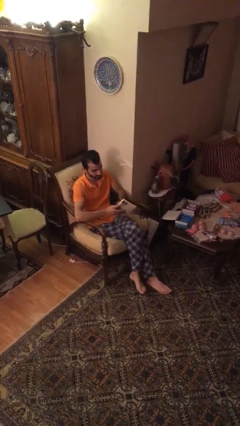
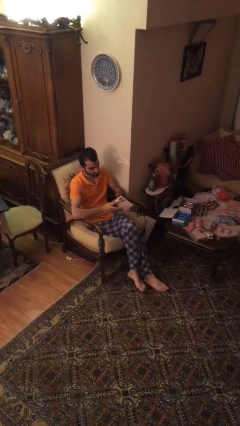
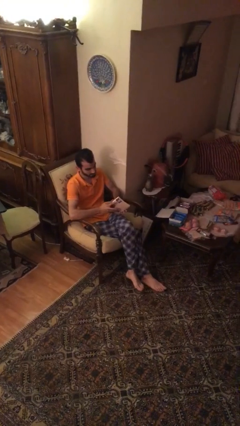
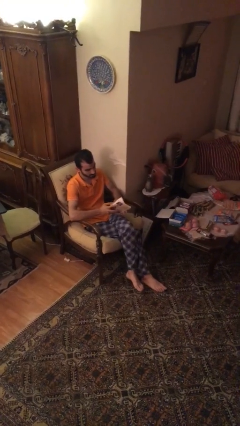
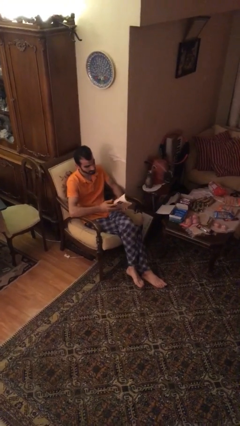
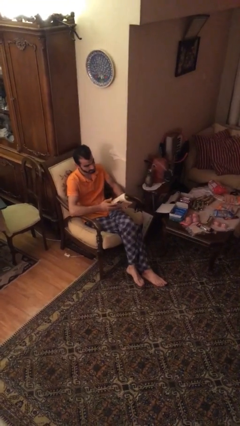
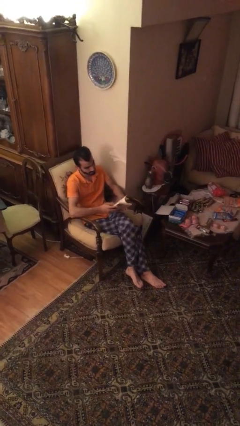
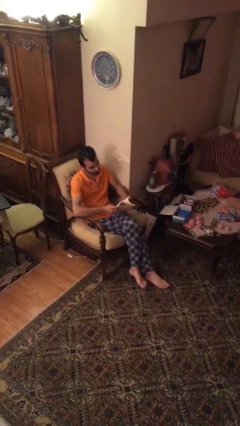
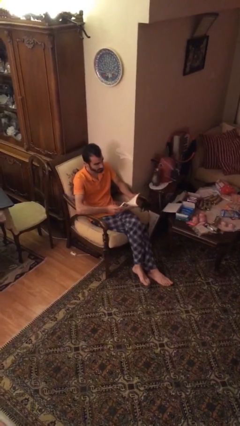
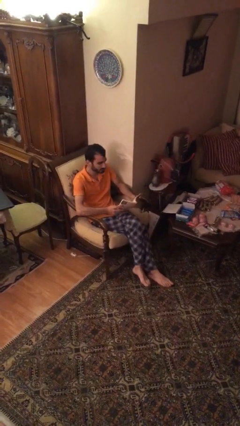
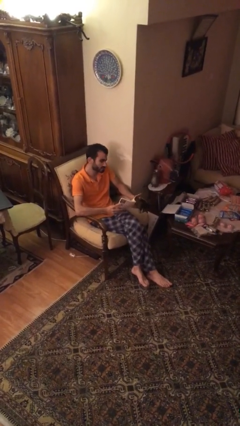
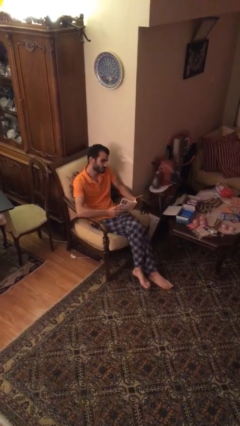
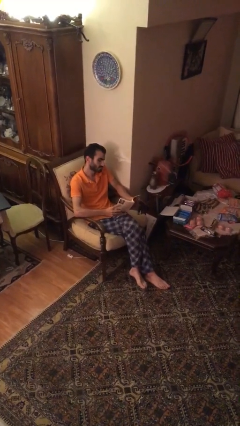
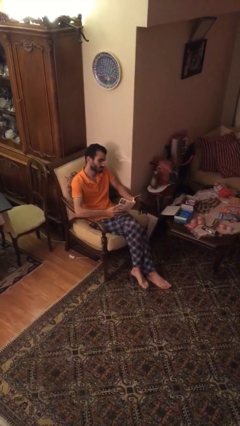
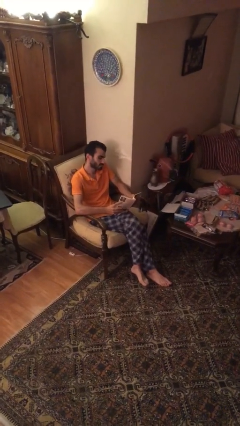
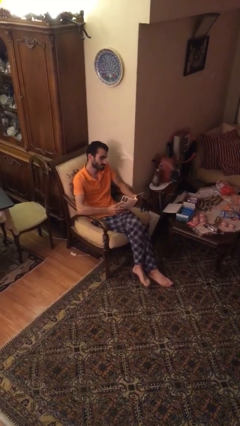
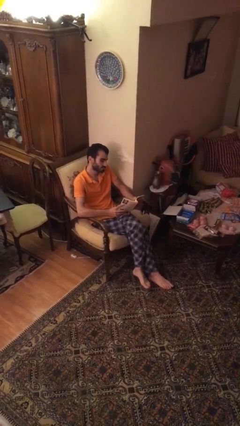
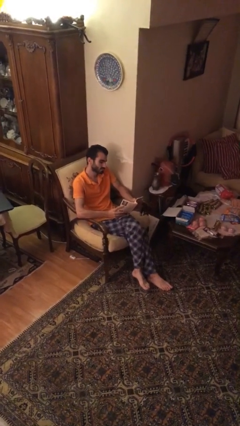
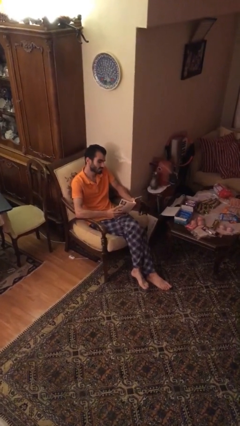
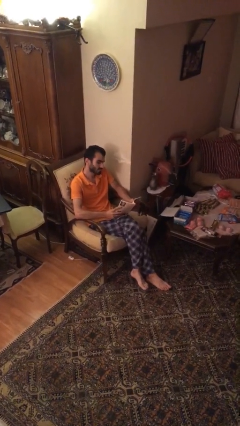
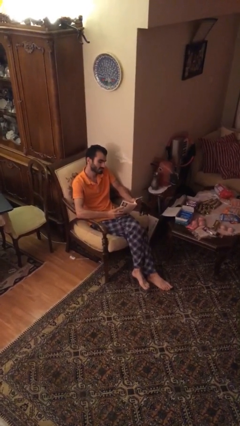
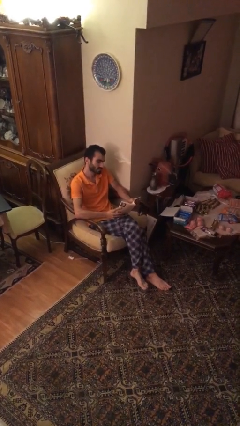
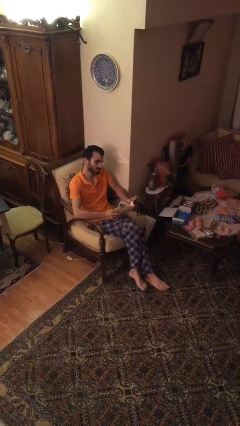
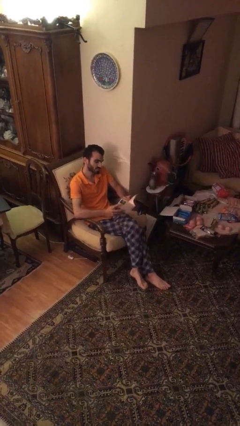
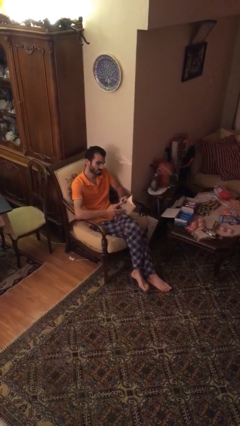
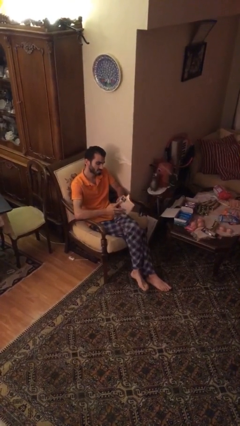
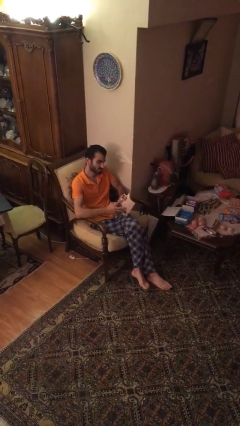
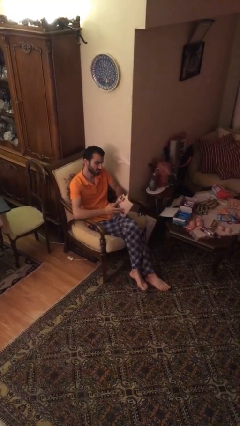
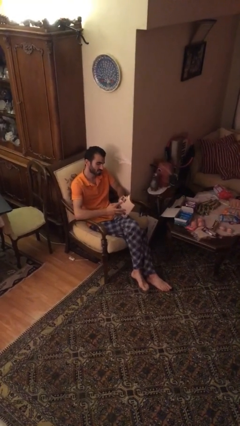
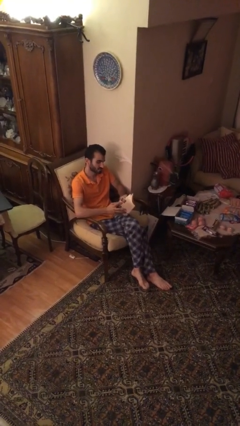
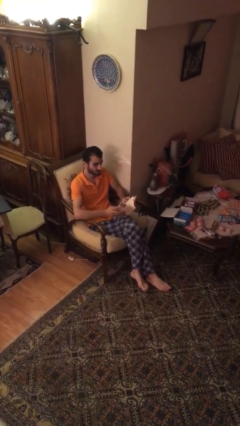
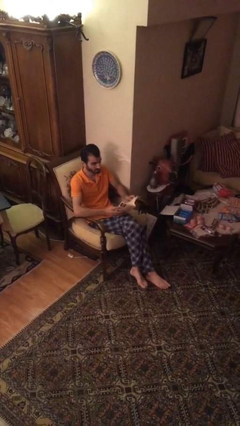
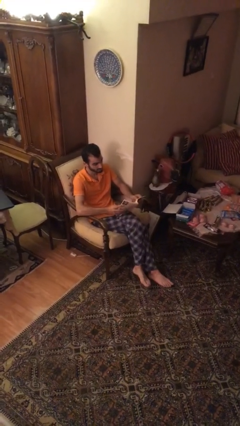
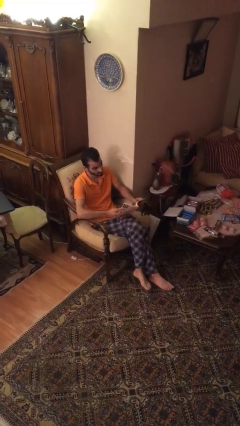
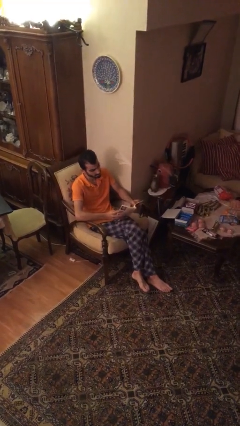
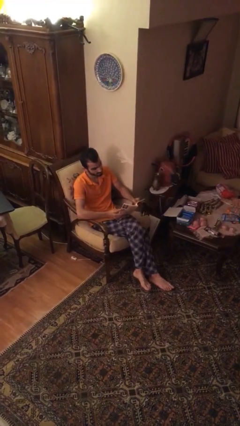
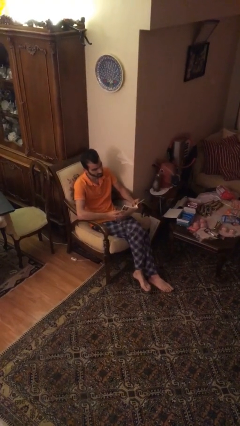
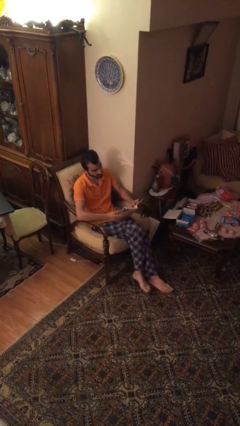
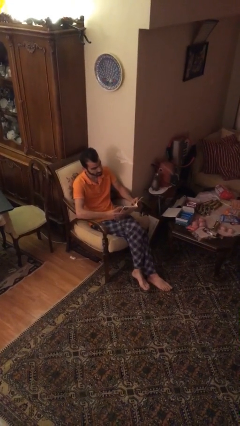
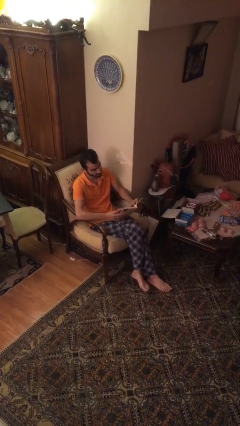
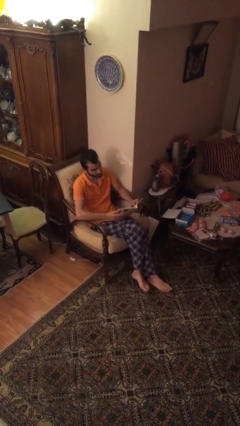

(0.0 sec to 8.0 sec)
person reads document

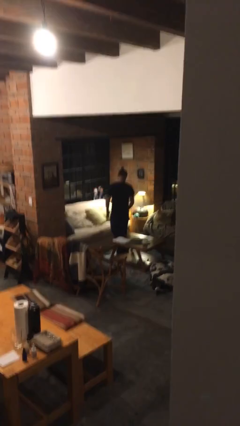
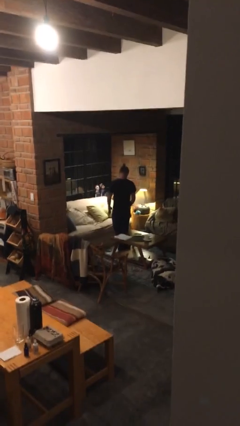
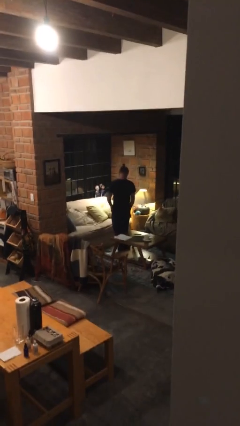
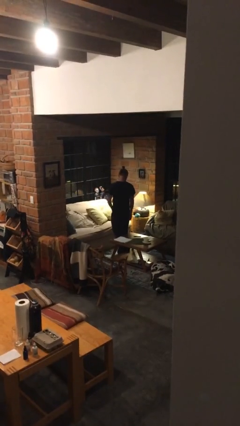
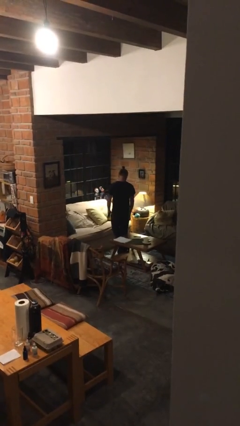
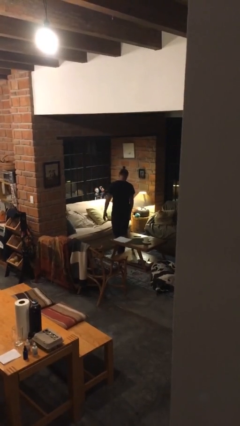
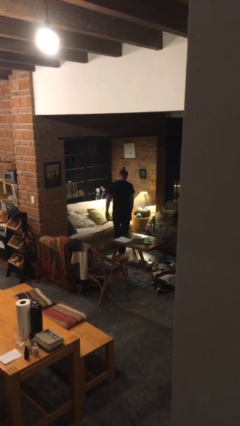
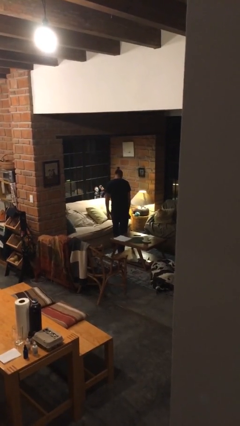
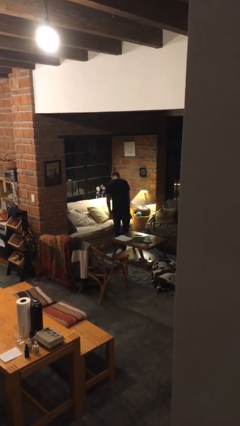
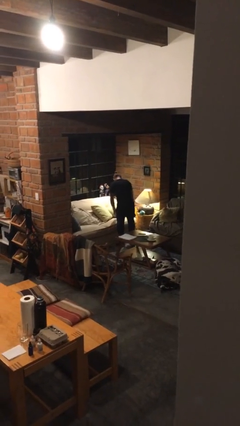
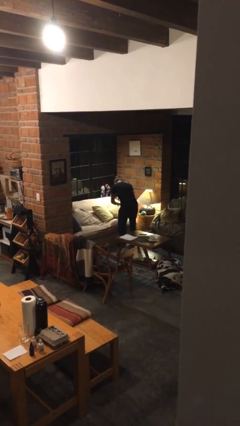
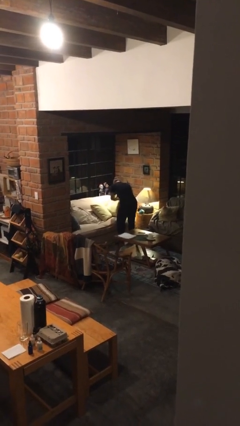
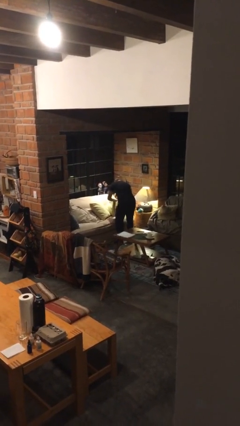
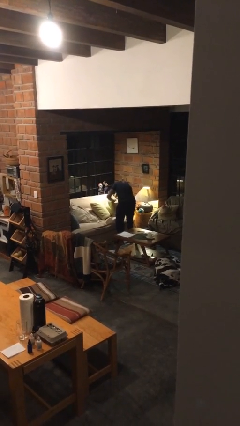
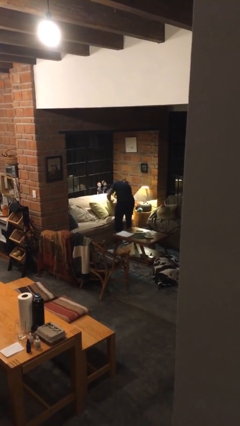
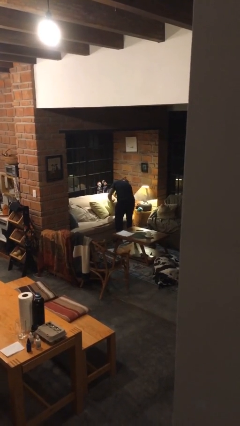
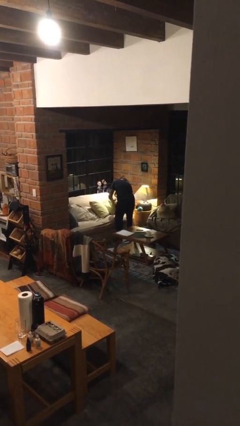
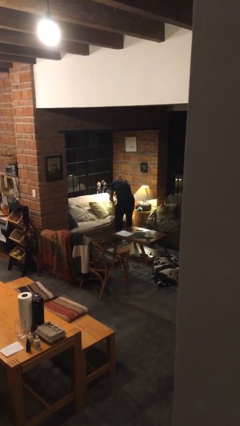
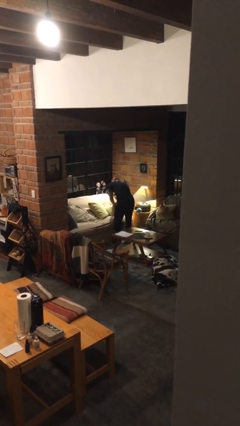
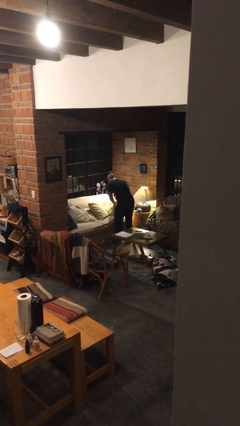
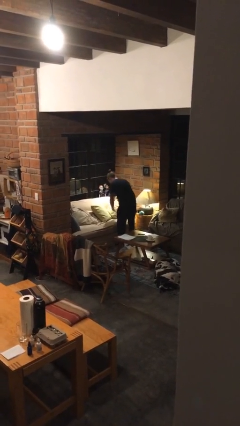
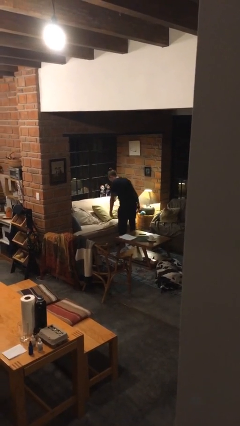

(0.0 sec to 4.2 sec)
person searches in couch

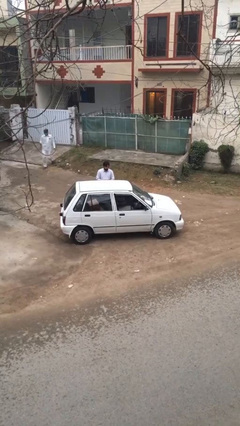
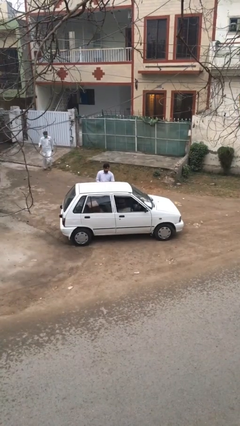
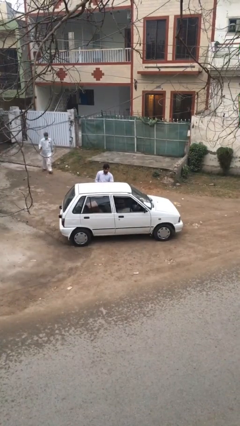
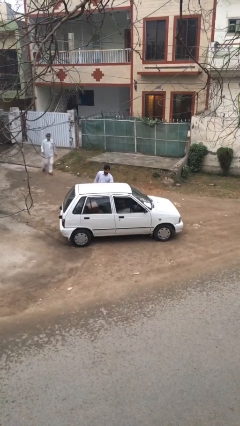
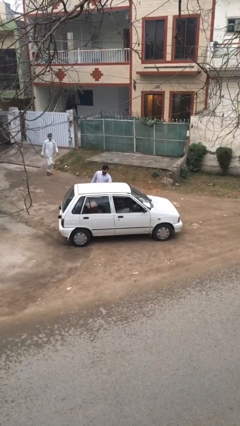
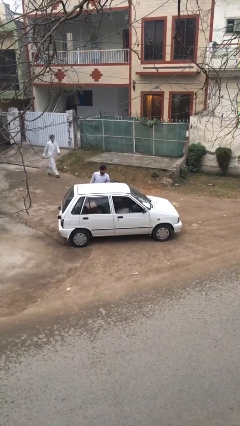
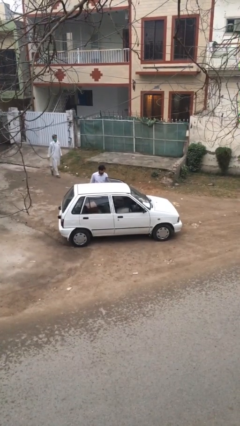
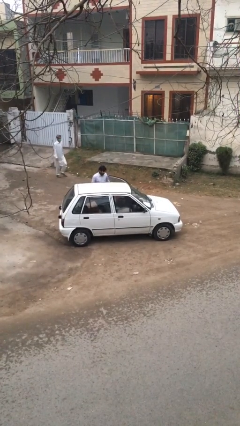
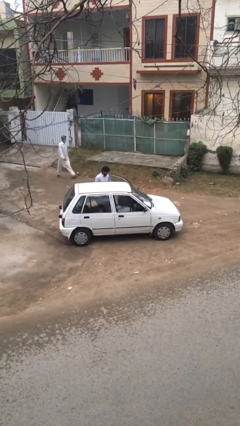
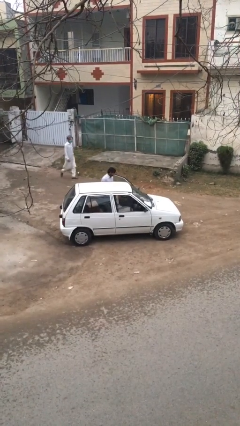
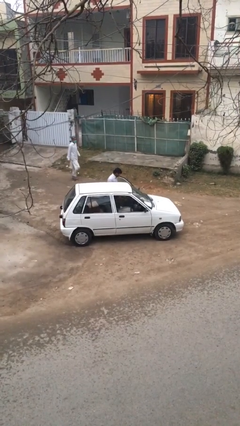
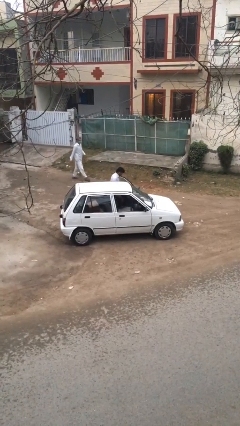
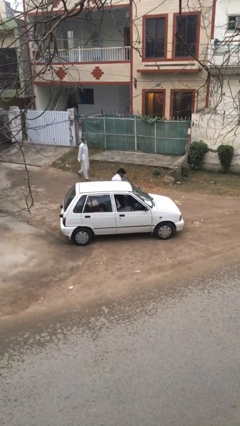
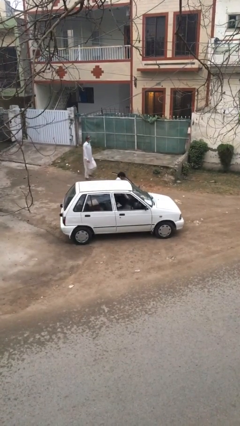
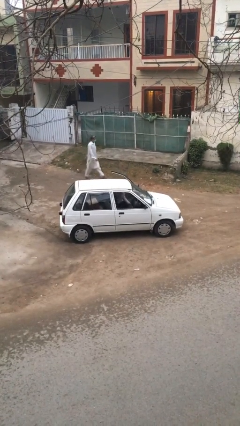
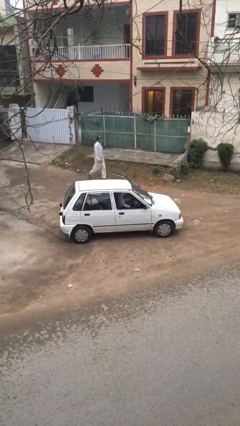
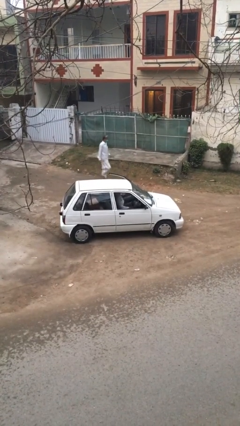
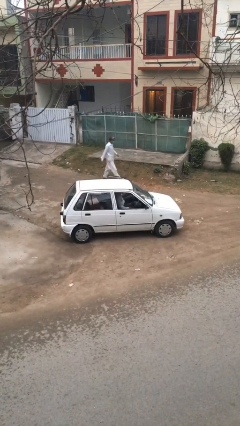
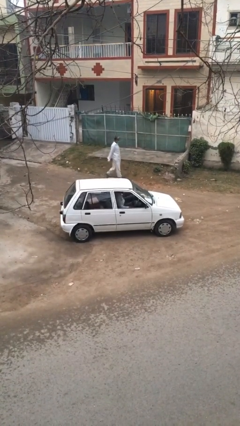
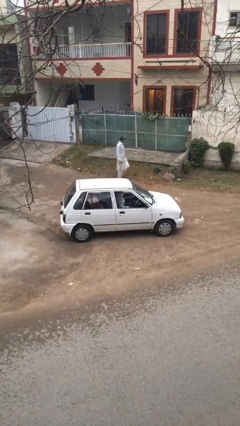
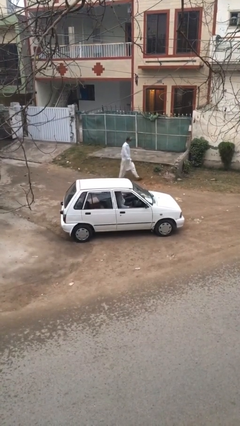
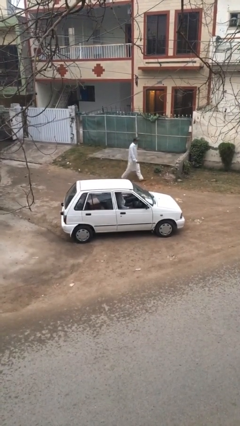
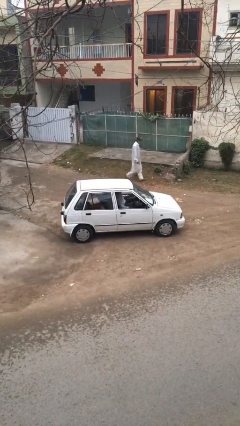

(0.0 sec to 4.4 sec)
car picks up person

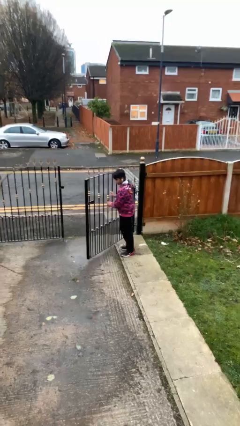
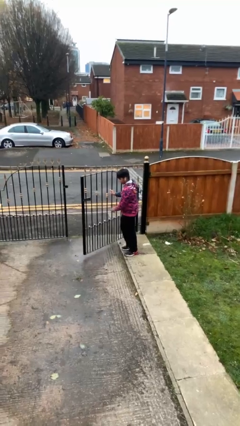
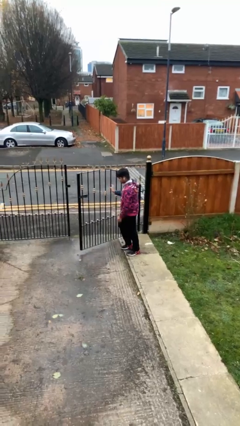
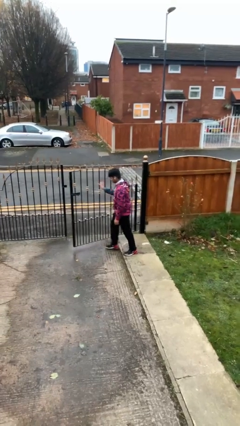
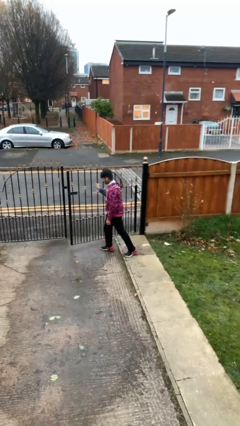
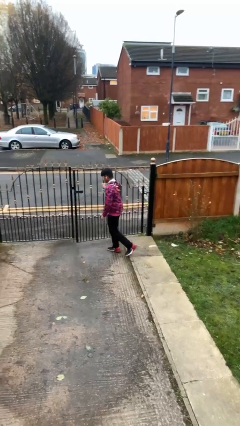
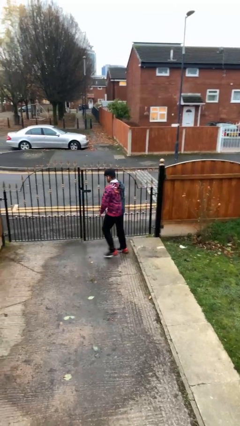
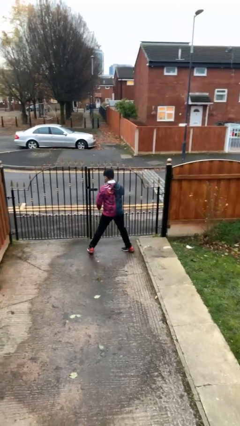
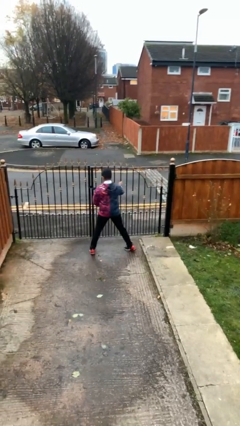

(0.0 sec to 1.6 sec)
person closes facility door
